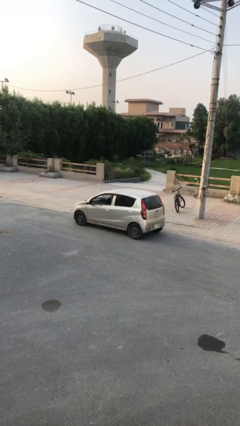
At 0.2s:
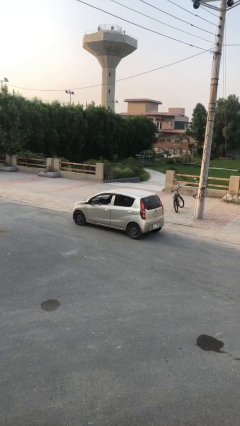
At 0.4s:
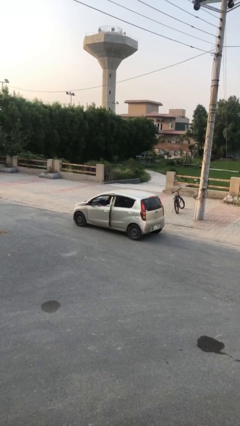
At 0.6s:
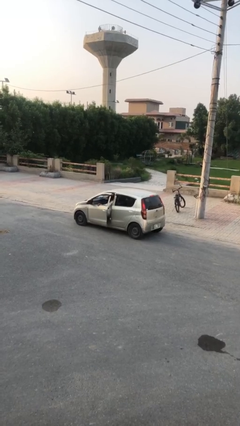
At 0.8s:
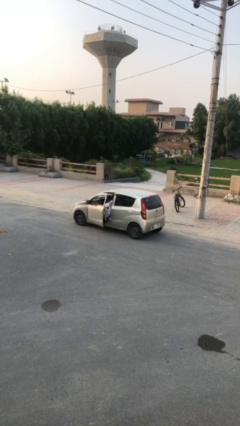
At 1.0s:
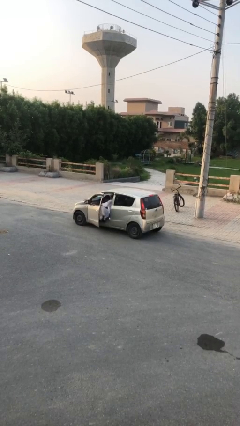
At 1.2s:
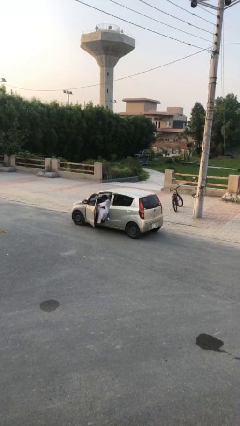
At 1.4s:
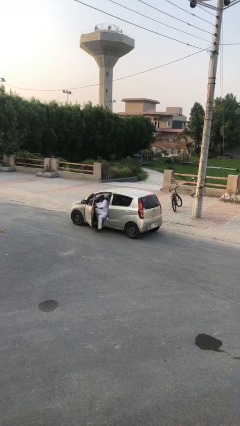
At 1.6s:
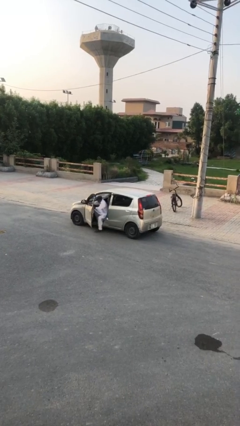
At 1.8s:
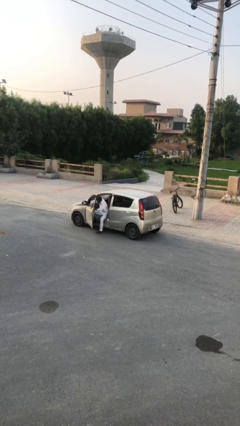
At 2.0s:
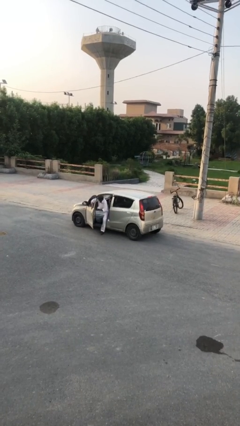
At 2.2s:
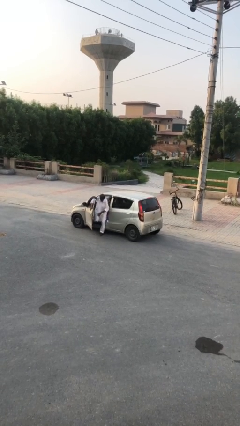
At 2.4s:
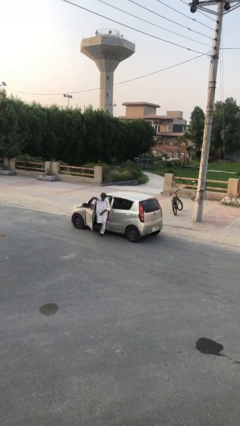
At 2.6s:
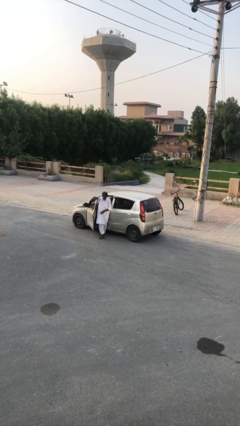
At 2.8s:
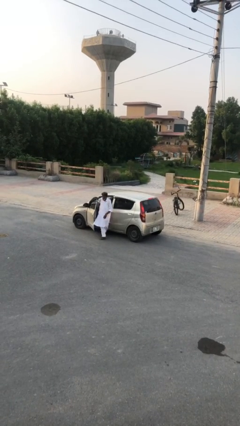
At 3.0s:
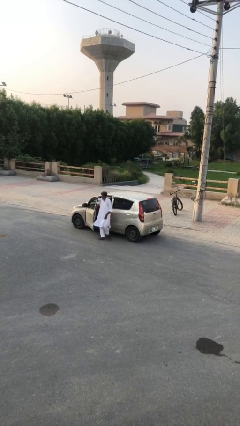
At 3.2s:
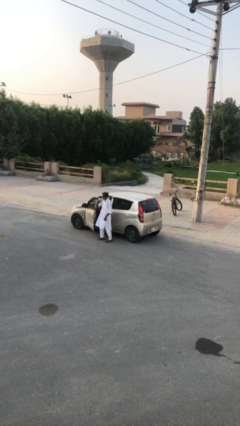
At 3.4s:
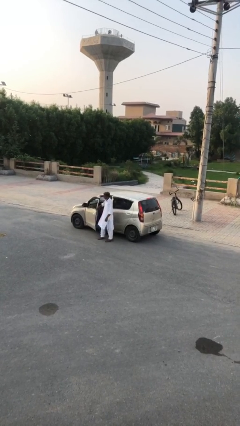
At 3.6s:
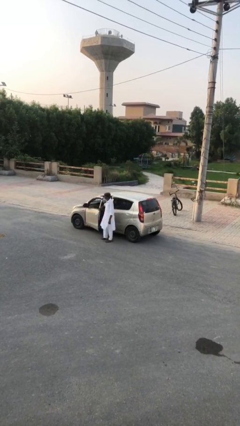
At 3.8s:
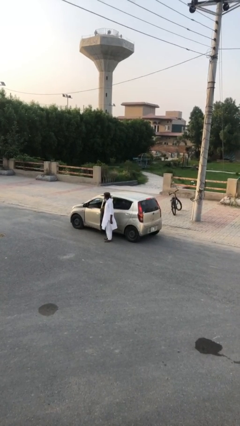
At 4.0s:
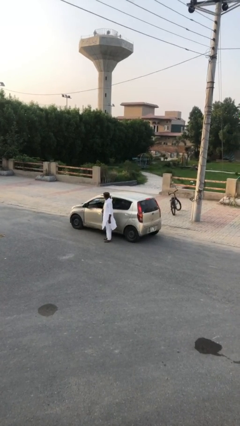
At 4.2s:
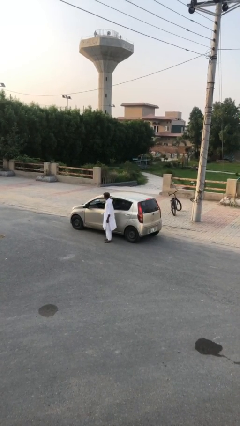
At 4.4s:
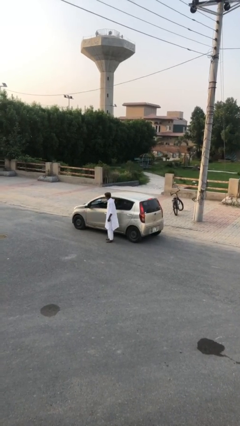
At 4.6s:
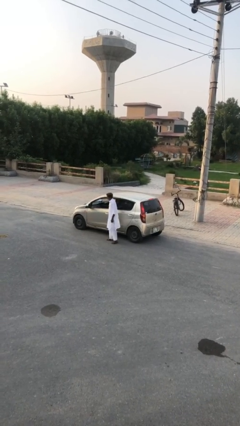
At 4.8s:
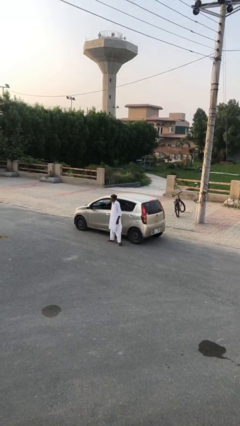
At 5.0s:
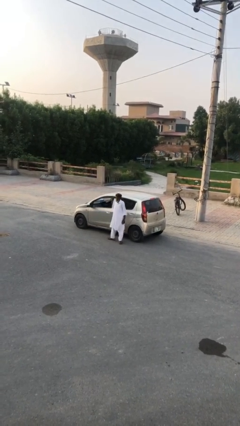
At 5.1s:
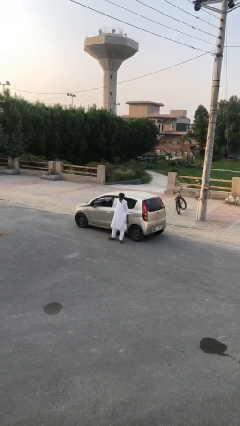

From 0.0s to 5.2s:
car drops off person

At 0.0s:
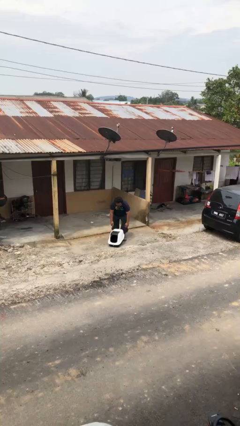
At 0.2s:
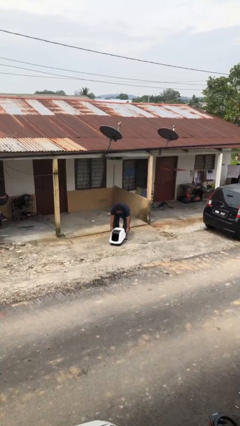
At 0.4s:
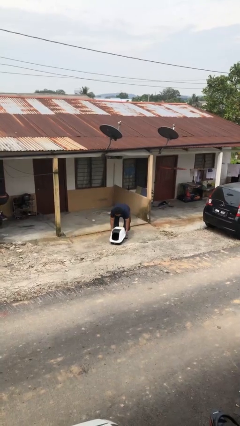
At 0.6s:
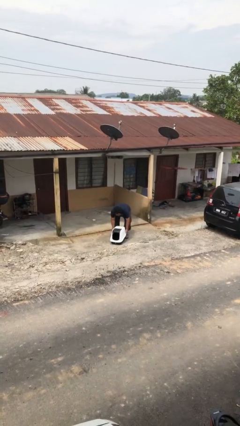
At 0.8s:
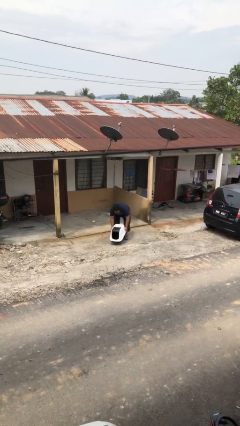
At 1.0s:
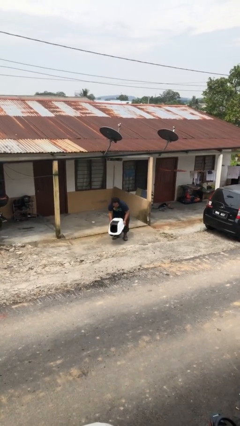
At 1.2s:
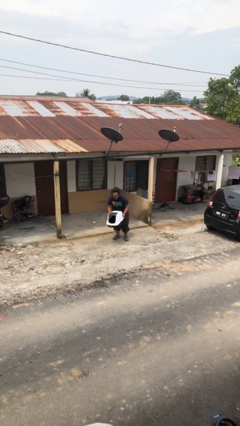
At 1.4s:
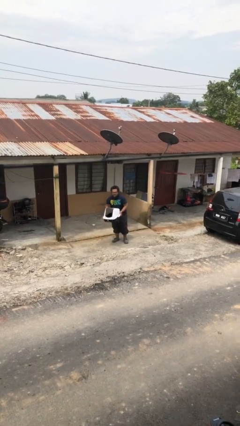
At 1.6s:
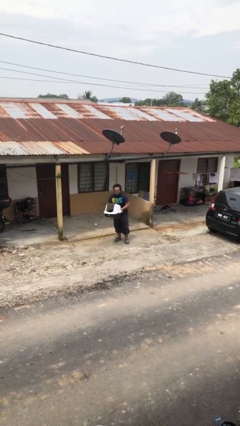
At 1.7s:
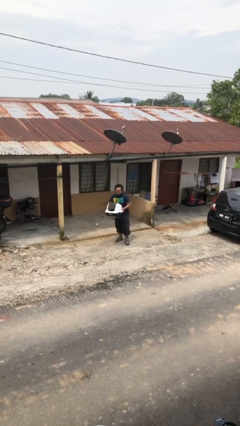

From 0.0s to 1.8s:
person picks up object from floor

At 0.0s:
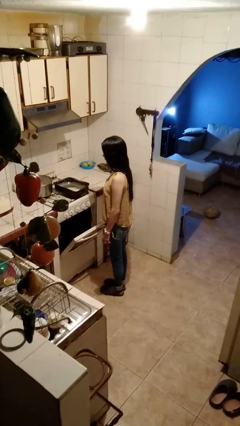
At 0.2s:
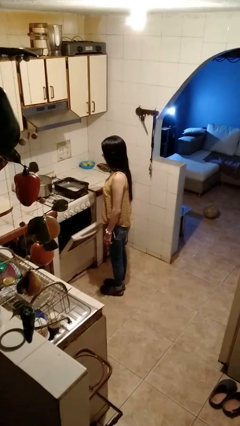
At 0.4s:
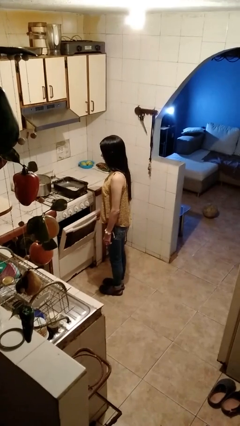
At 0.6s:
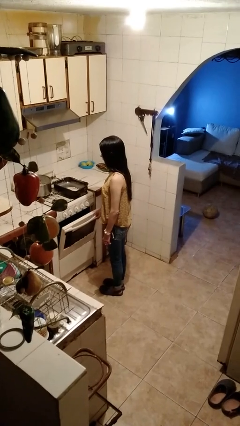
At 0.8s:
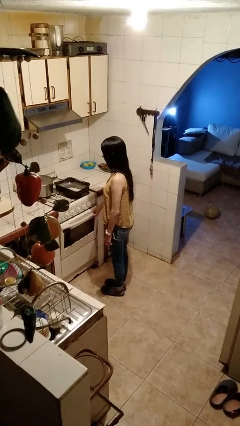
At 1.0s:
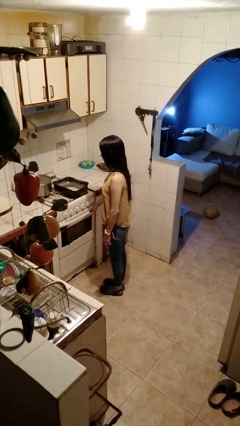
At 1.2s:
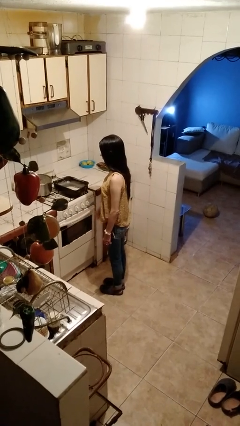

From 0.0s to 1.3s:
person closes oven door

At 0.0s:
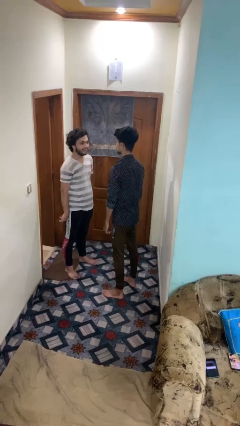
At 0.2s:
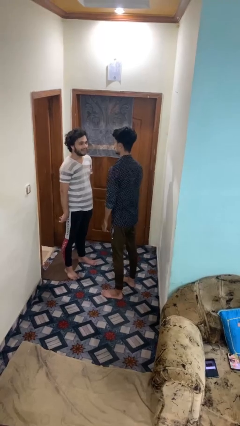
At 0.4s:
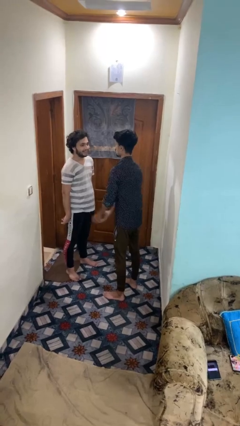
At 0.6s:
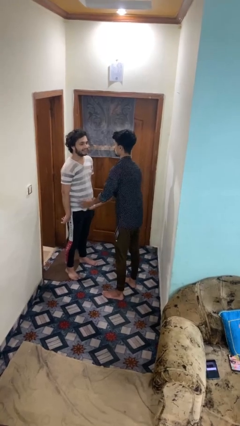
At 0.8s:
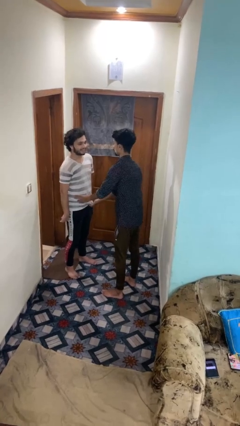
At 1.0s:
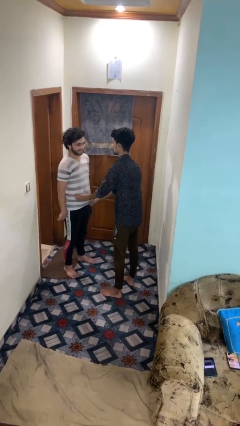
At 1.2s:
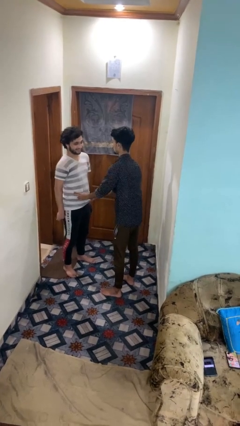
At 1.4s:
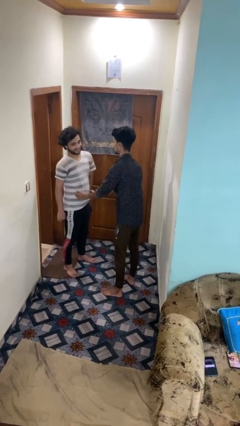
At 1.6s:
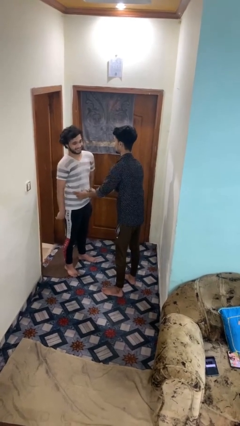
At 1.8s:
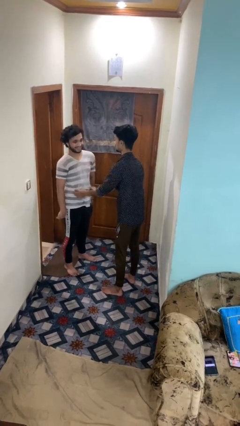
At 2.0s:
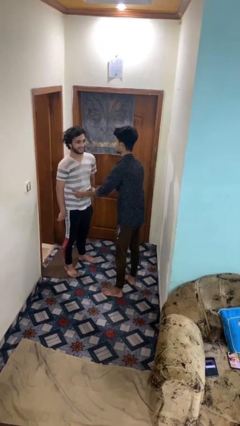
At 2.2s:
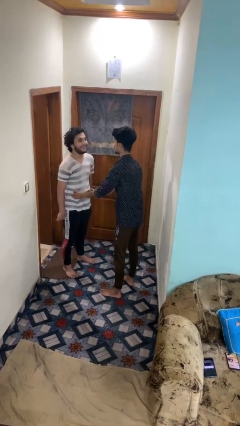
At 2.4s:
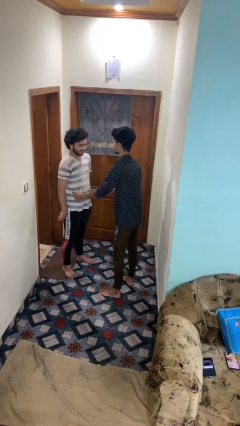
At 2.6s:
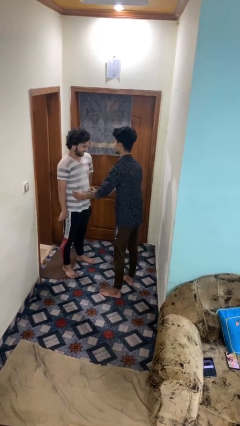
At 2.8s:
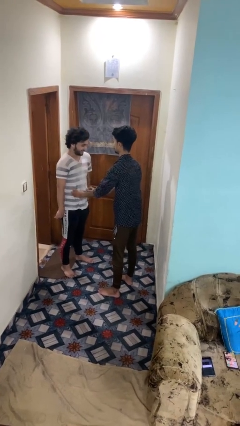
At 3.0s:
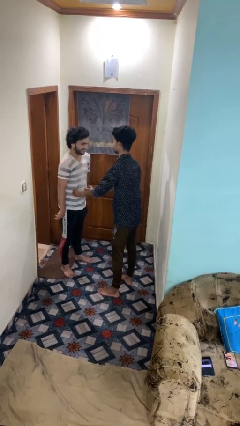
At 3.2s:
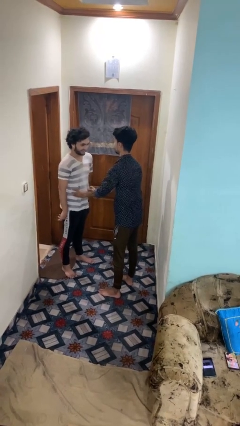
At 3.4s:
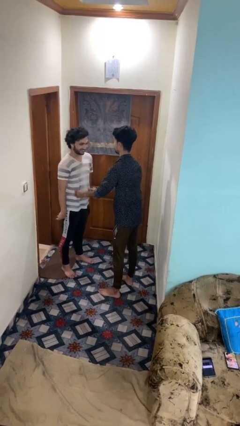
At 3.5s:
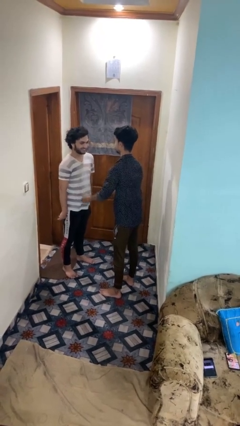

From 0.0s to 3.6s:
person tickles person

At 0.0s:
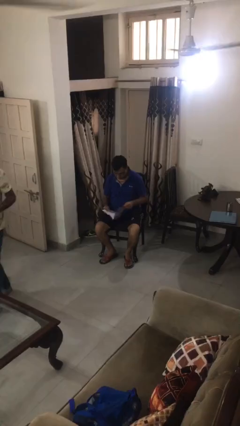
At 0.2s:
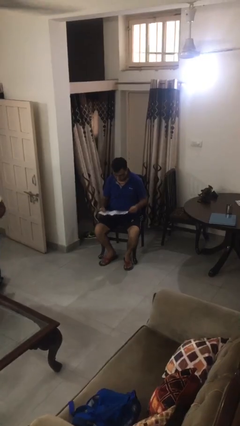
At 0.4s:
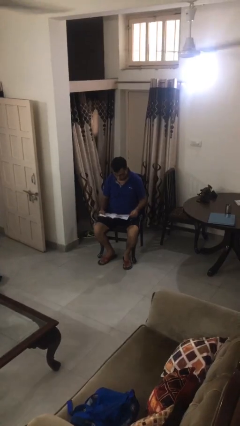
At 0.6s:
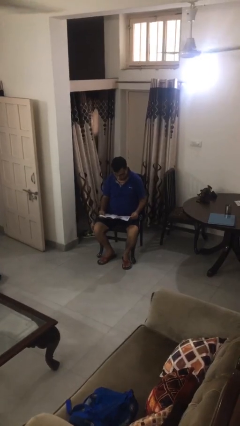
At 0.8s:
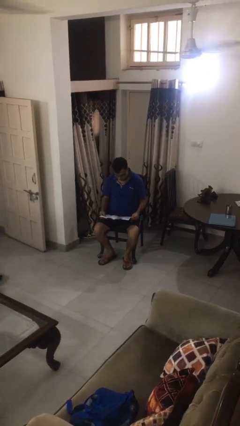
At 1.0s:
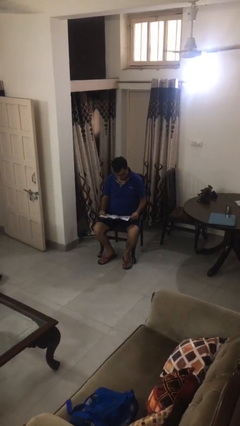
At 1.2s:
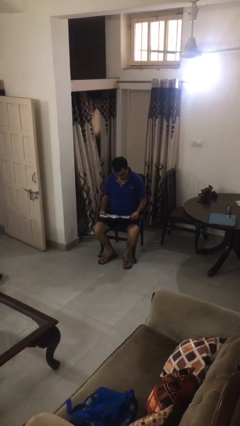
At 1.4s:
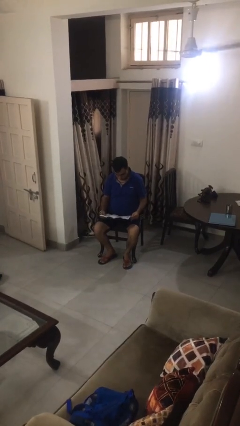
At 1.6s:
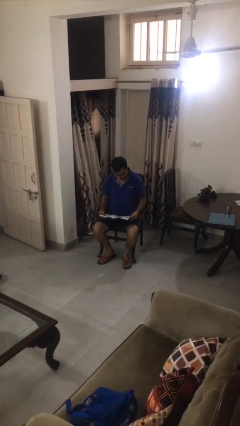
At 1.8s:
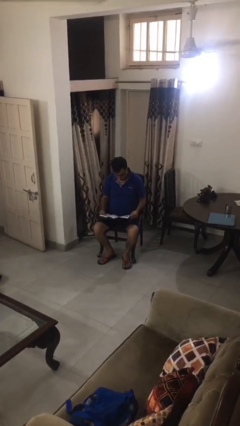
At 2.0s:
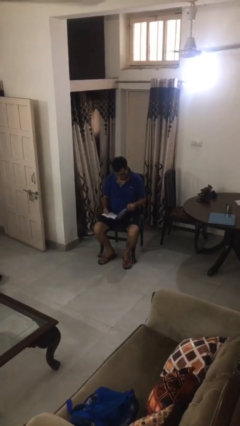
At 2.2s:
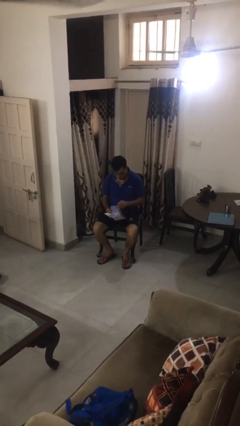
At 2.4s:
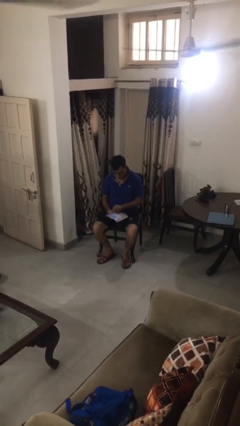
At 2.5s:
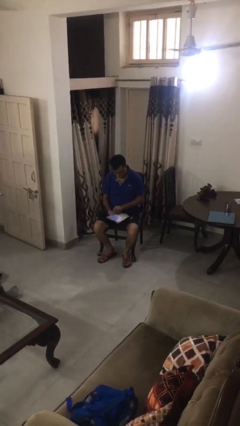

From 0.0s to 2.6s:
person reads magazine

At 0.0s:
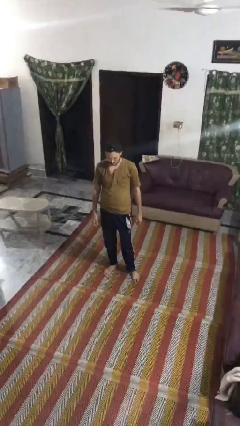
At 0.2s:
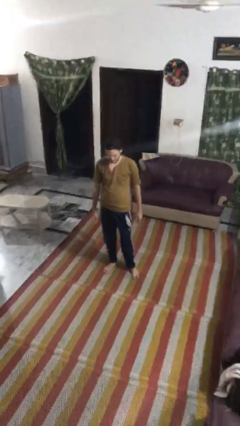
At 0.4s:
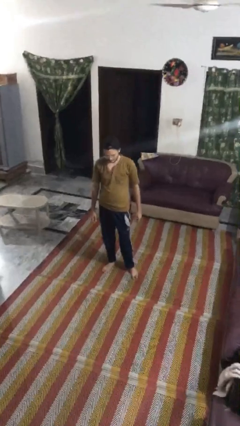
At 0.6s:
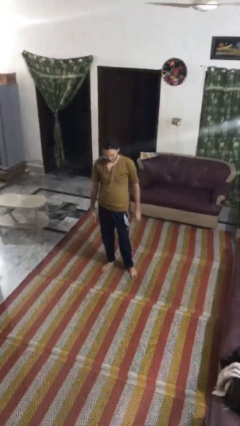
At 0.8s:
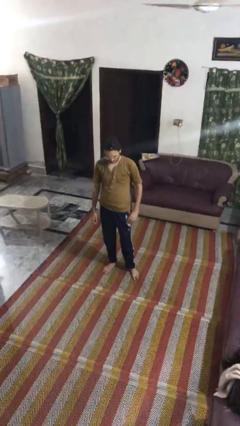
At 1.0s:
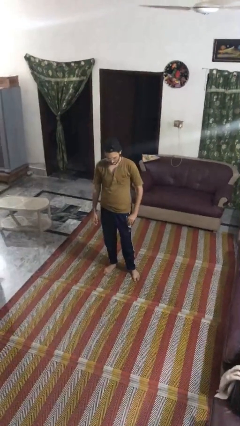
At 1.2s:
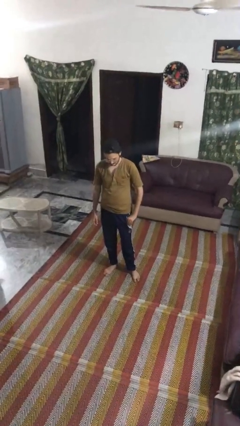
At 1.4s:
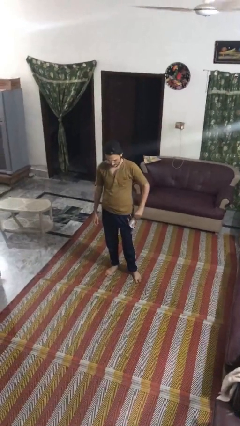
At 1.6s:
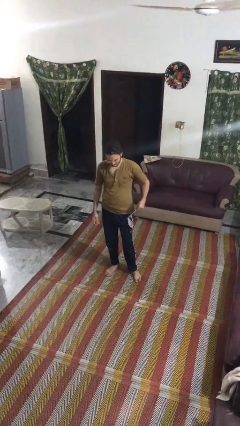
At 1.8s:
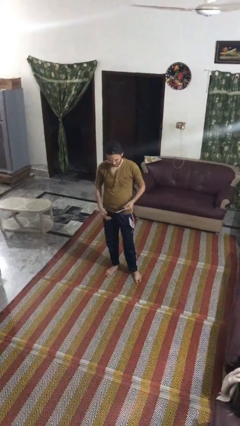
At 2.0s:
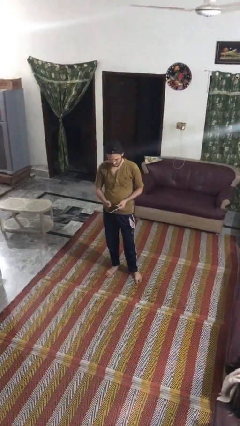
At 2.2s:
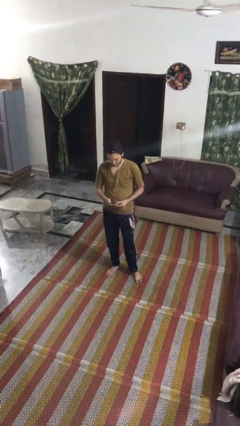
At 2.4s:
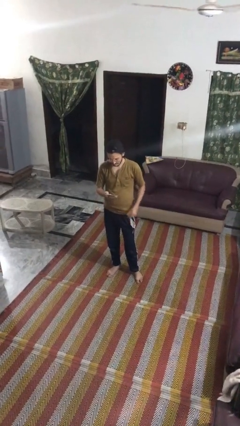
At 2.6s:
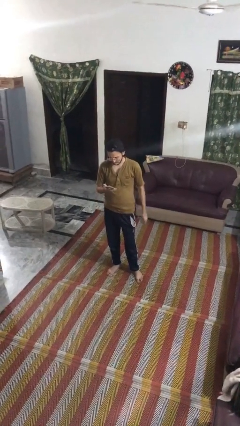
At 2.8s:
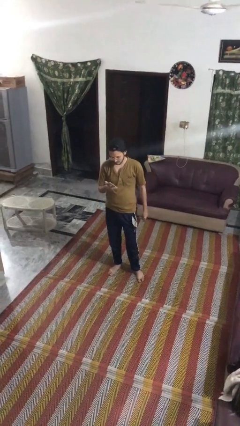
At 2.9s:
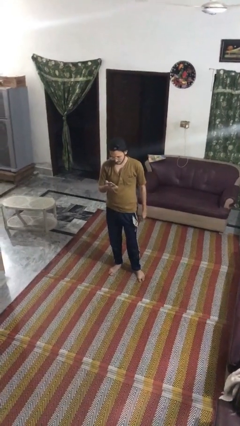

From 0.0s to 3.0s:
person takes phone from pocket
